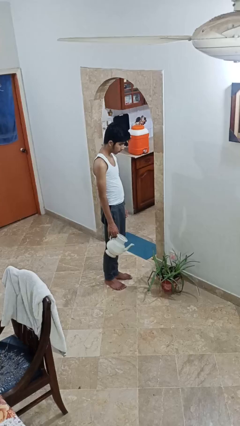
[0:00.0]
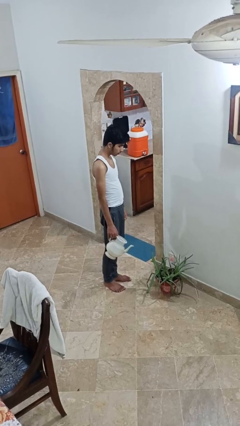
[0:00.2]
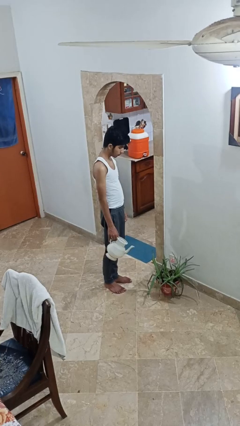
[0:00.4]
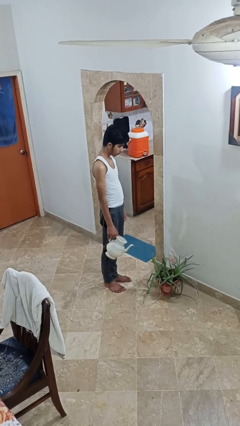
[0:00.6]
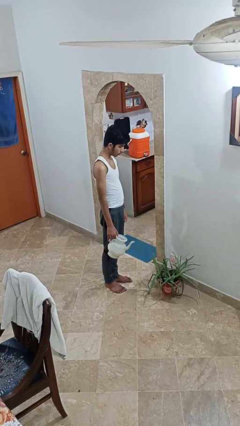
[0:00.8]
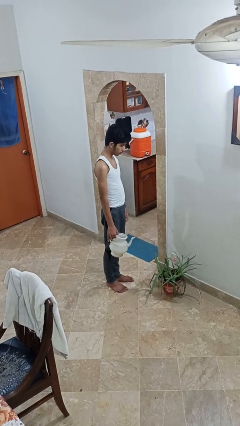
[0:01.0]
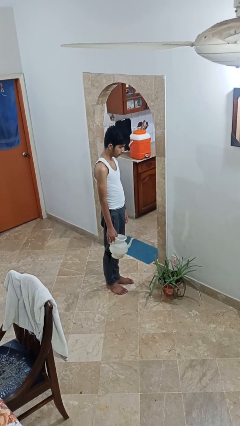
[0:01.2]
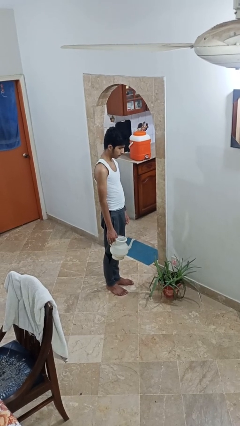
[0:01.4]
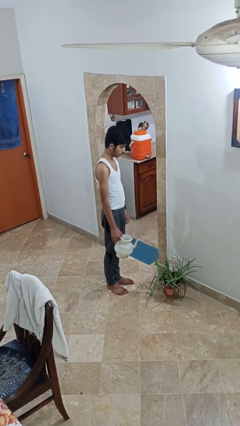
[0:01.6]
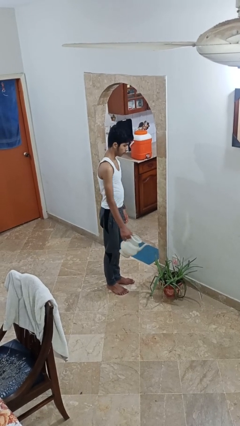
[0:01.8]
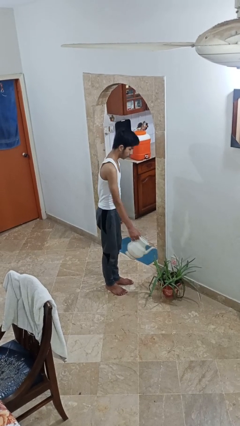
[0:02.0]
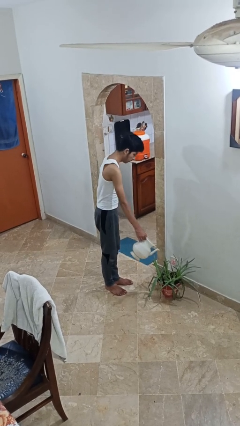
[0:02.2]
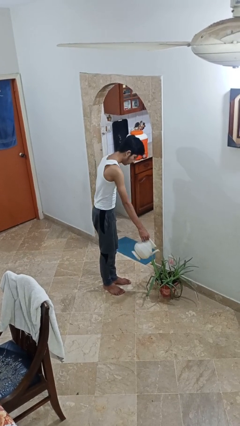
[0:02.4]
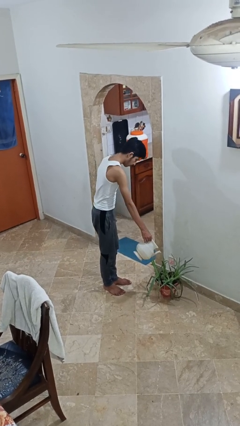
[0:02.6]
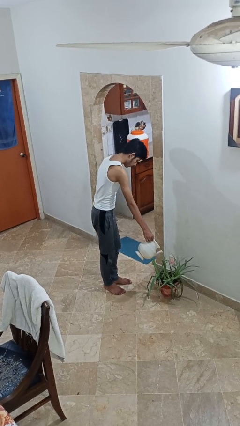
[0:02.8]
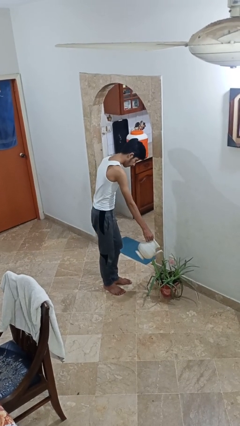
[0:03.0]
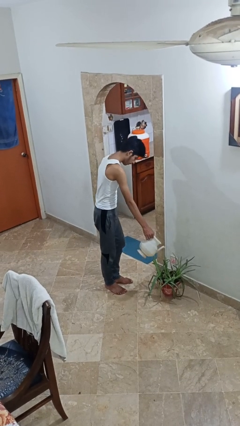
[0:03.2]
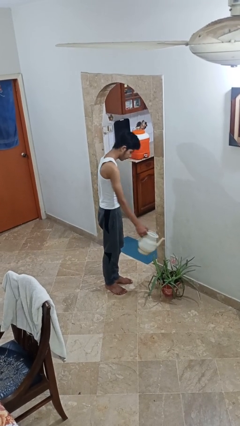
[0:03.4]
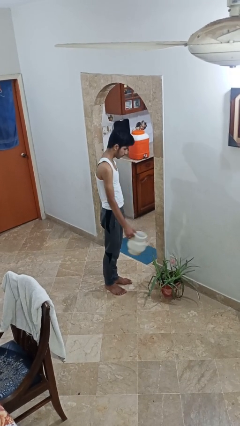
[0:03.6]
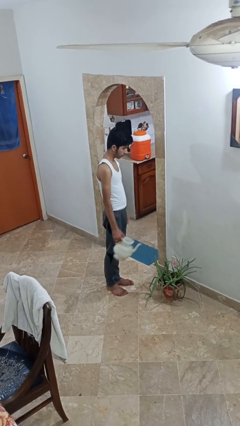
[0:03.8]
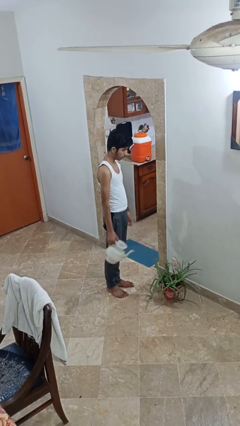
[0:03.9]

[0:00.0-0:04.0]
person waters houseplant

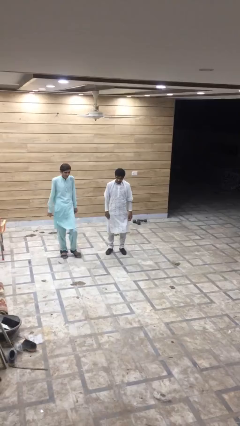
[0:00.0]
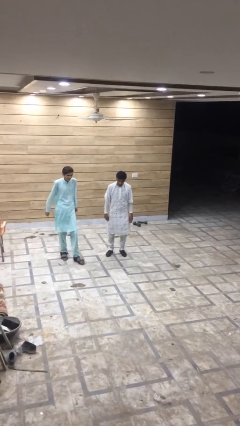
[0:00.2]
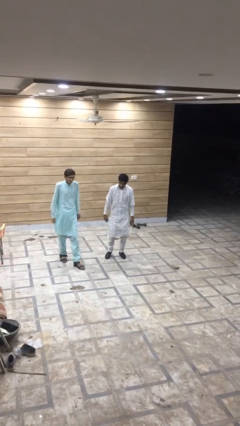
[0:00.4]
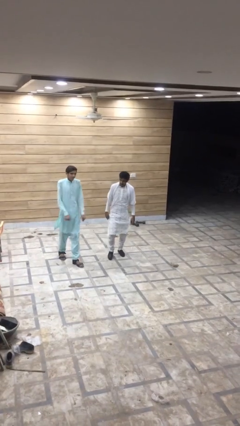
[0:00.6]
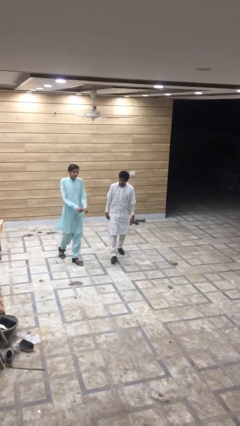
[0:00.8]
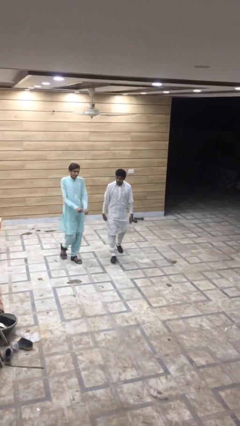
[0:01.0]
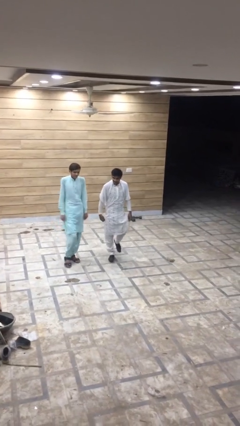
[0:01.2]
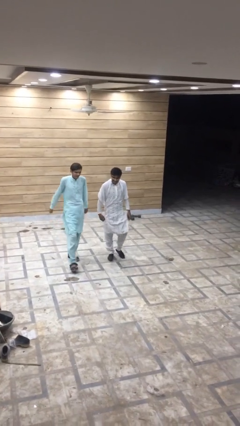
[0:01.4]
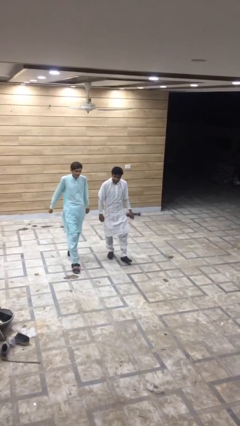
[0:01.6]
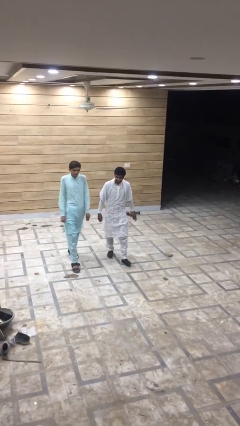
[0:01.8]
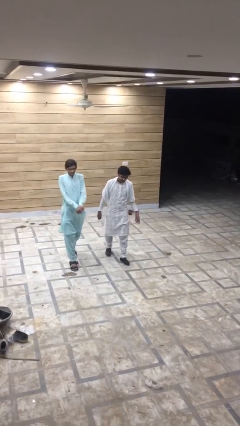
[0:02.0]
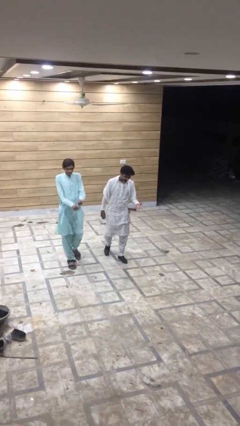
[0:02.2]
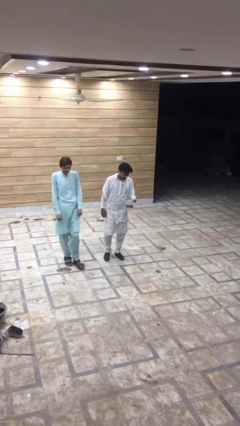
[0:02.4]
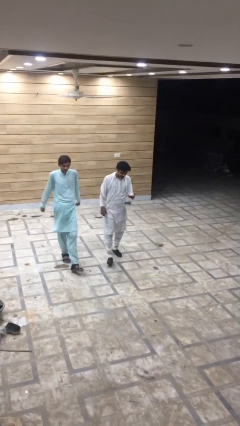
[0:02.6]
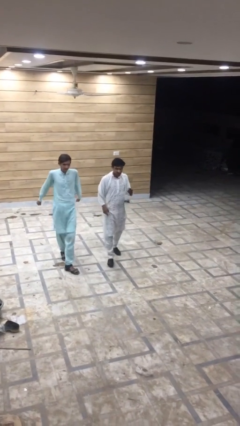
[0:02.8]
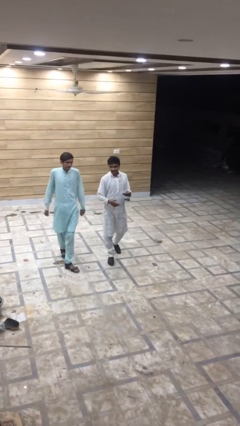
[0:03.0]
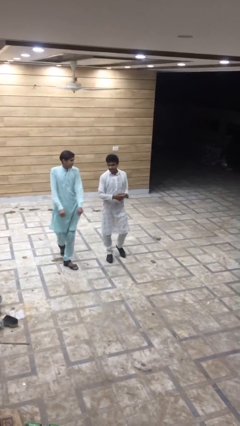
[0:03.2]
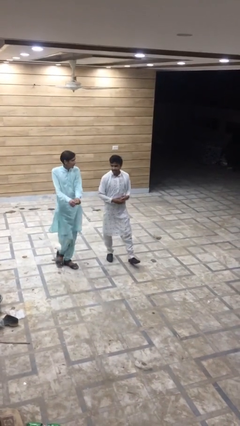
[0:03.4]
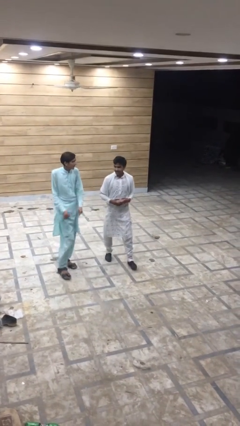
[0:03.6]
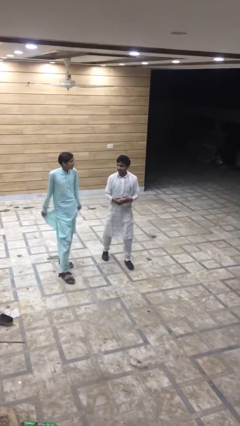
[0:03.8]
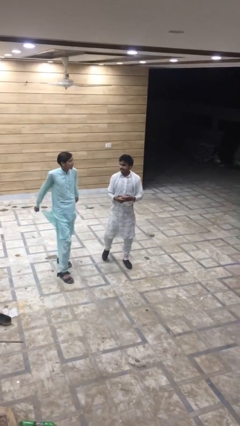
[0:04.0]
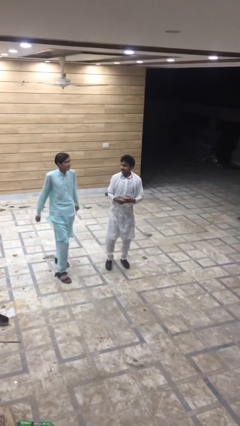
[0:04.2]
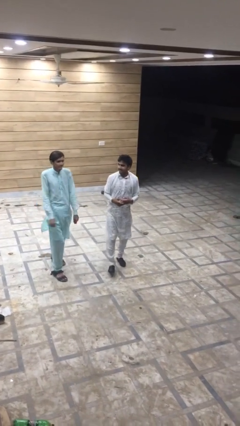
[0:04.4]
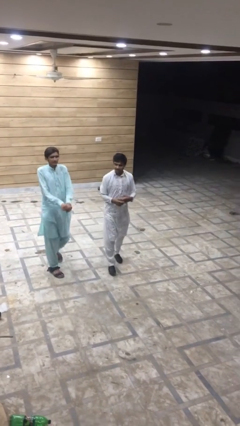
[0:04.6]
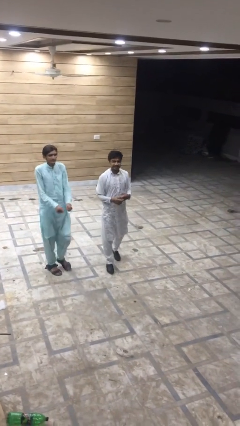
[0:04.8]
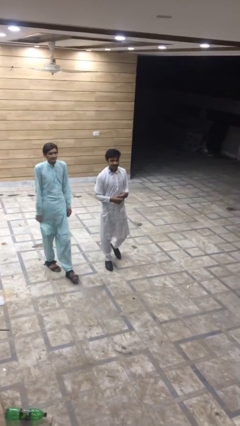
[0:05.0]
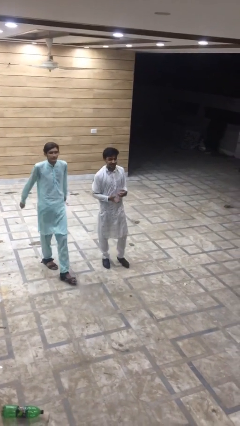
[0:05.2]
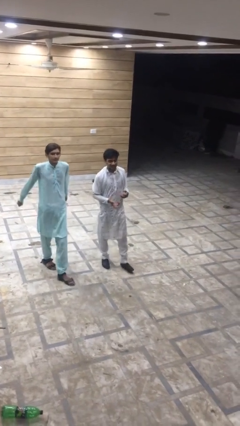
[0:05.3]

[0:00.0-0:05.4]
person talks to person

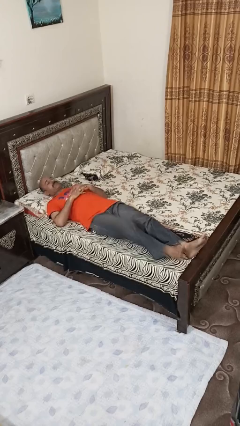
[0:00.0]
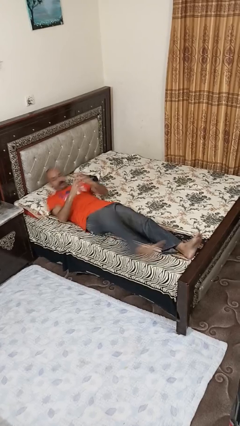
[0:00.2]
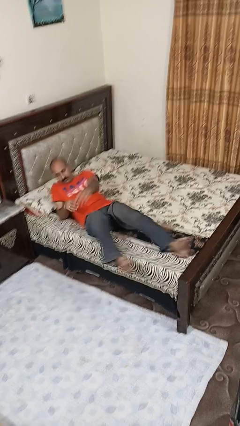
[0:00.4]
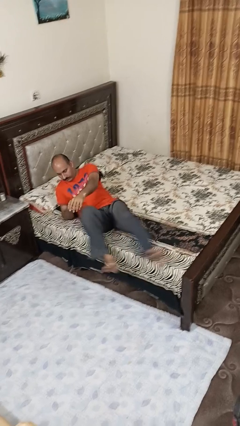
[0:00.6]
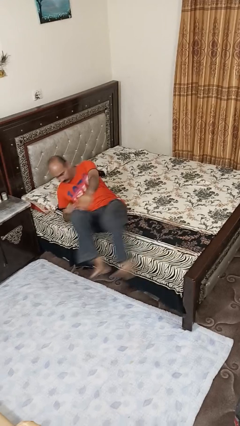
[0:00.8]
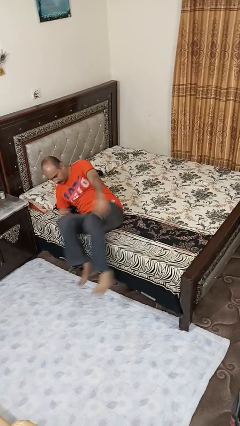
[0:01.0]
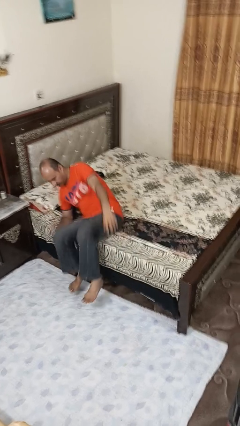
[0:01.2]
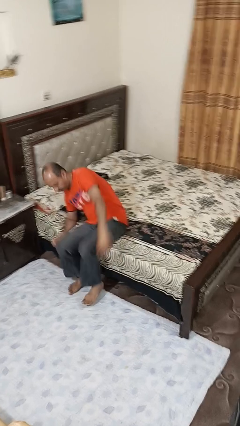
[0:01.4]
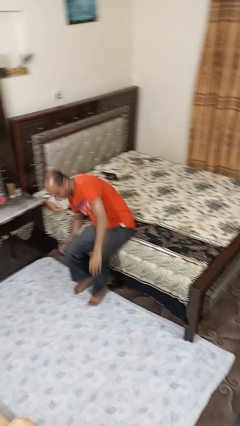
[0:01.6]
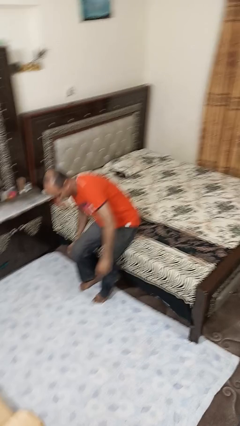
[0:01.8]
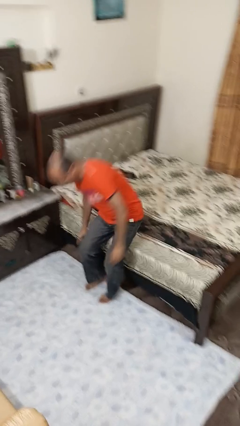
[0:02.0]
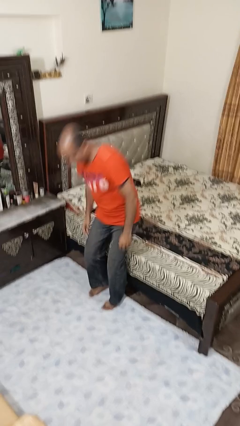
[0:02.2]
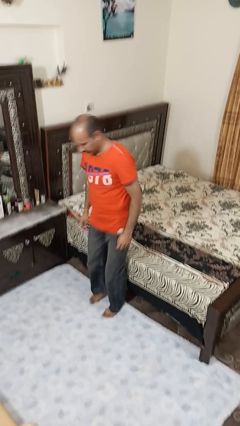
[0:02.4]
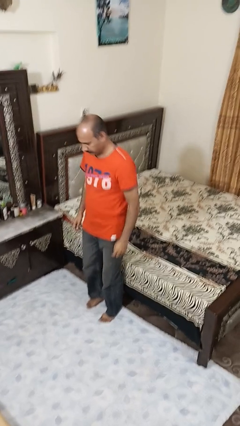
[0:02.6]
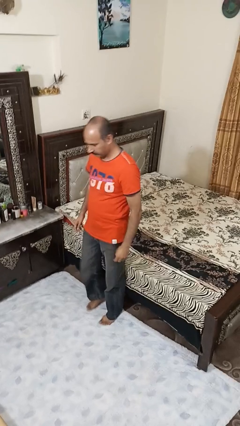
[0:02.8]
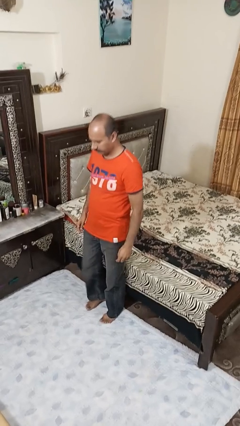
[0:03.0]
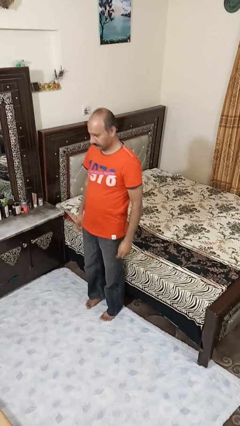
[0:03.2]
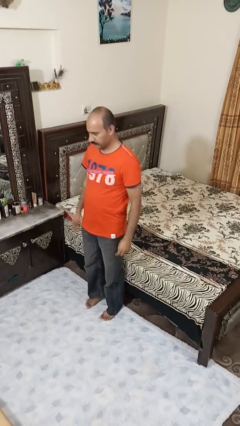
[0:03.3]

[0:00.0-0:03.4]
person stands up

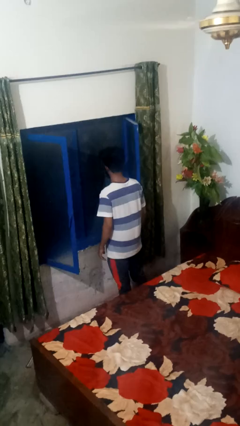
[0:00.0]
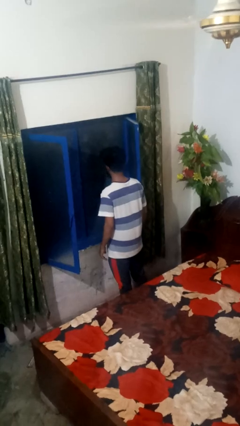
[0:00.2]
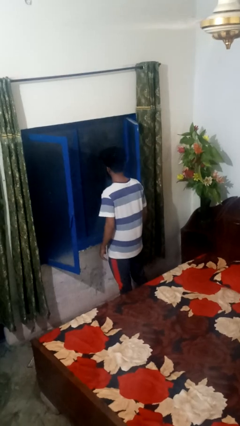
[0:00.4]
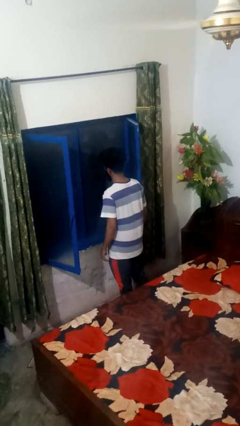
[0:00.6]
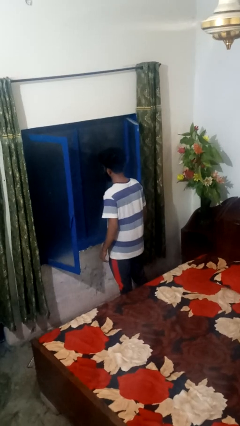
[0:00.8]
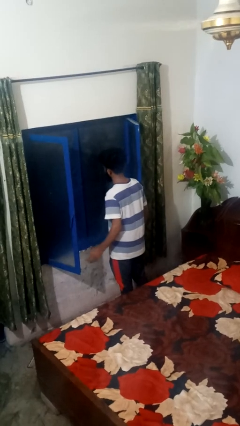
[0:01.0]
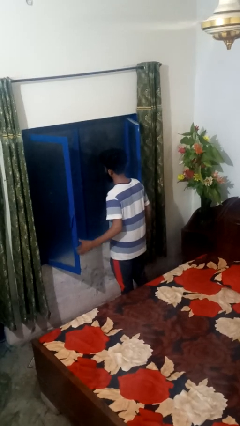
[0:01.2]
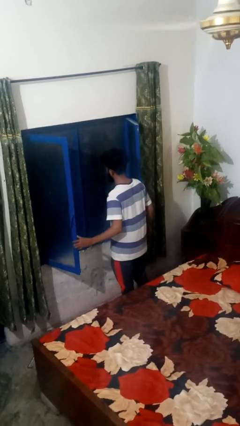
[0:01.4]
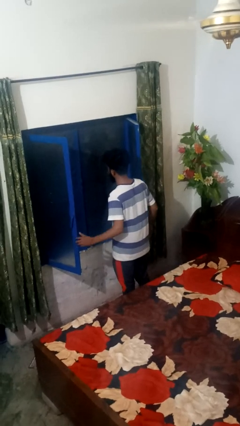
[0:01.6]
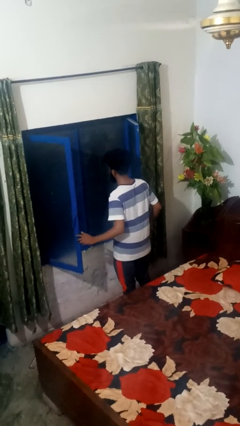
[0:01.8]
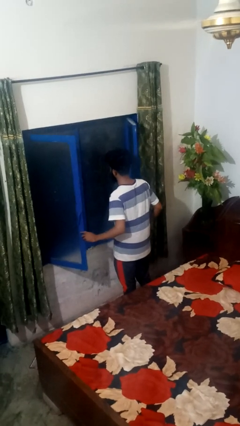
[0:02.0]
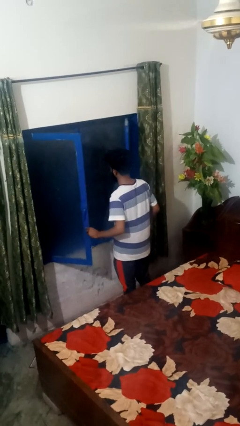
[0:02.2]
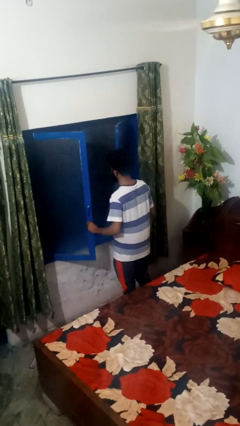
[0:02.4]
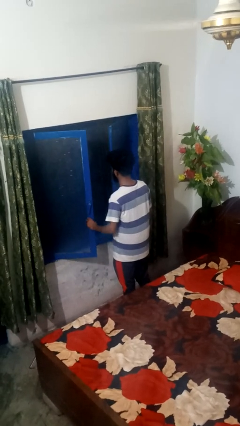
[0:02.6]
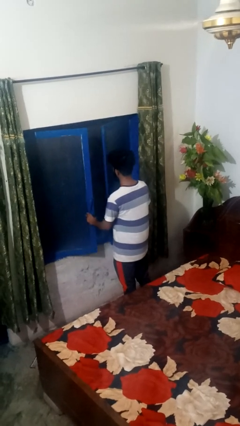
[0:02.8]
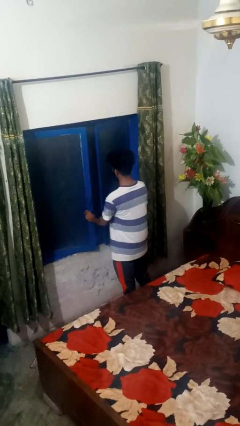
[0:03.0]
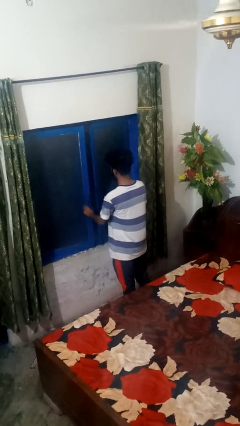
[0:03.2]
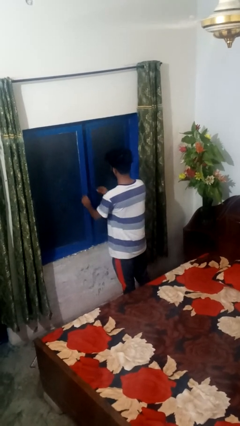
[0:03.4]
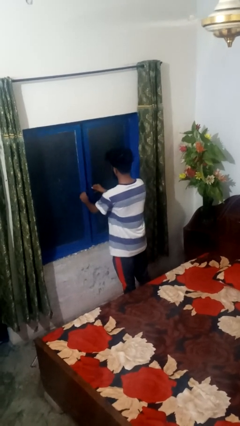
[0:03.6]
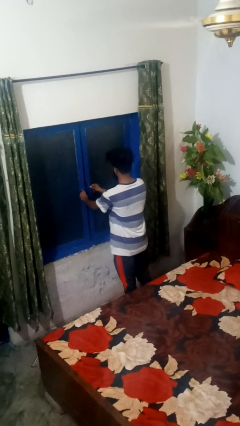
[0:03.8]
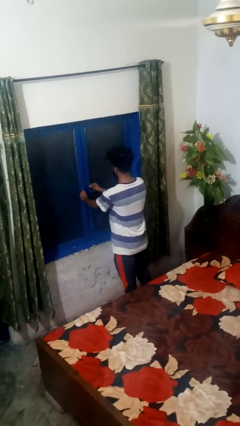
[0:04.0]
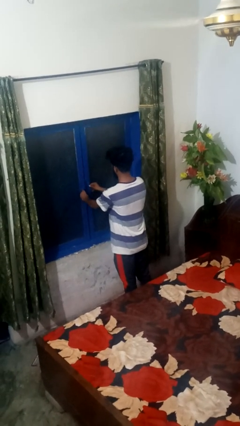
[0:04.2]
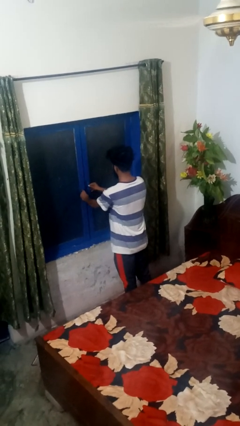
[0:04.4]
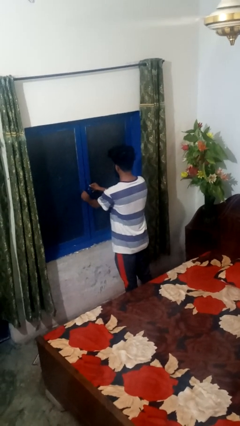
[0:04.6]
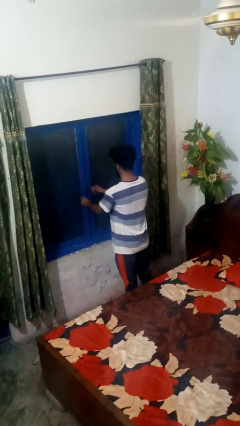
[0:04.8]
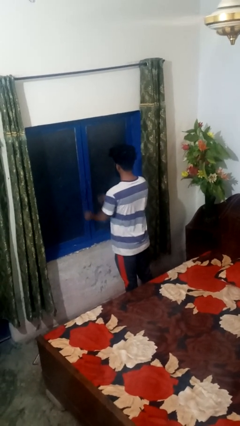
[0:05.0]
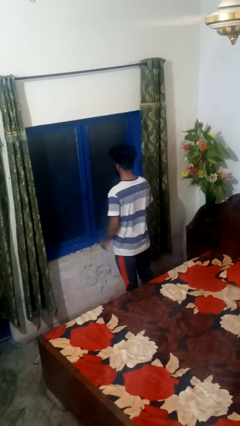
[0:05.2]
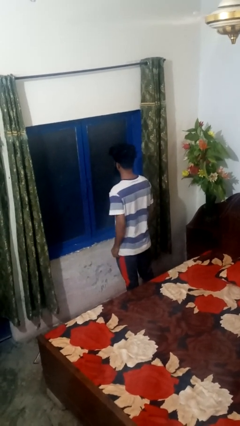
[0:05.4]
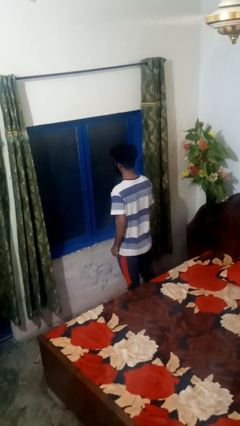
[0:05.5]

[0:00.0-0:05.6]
person closes home window
